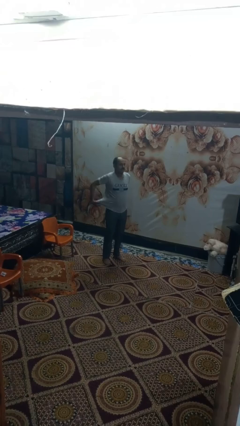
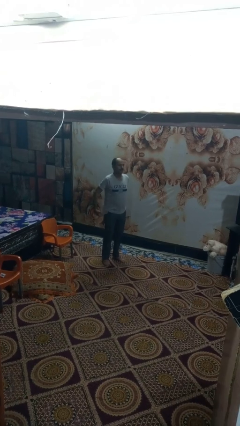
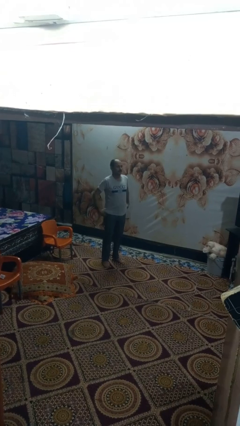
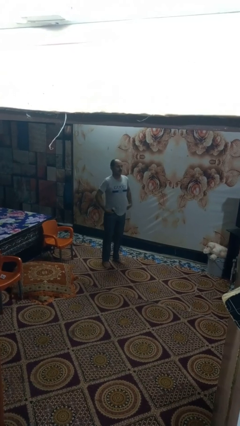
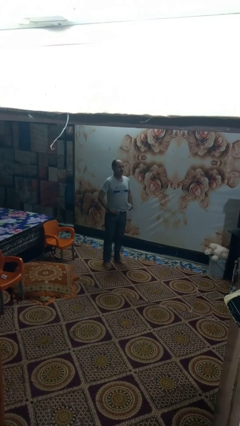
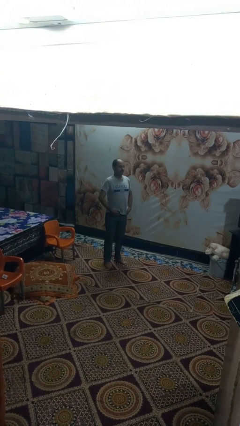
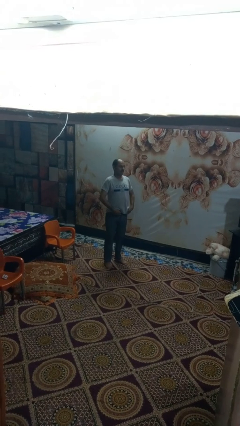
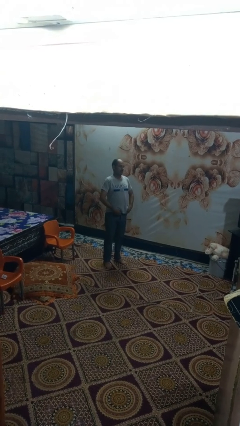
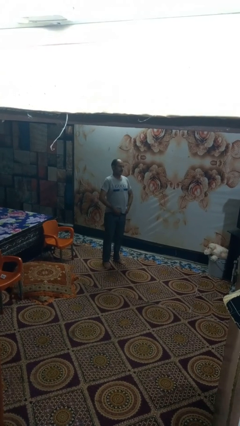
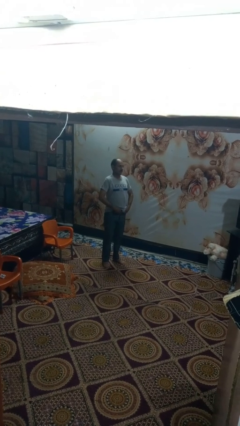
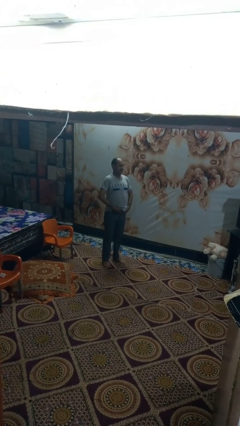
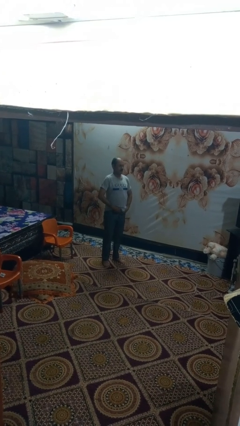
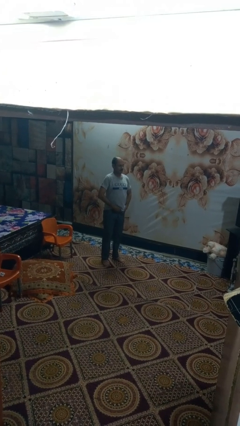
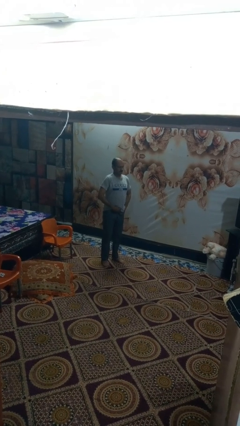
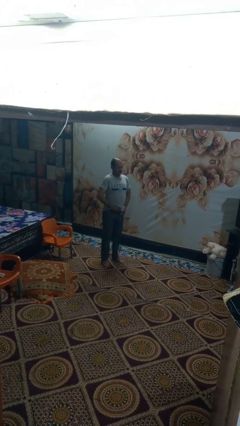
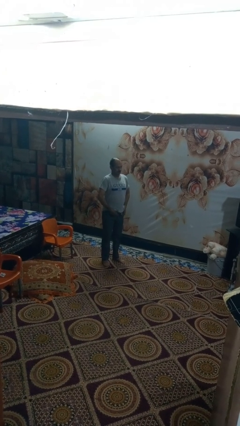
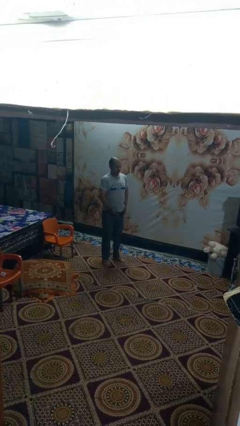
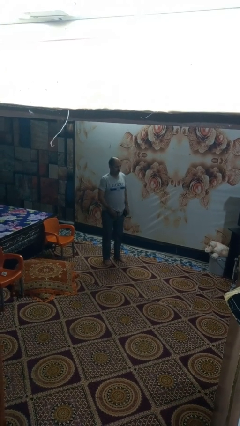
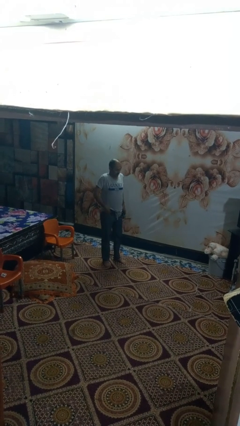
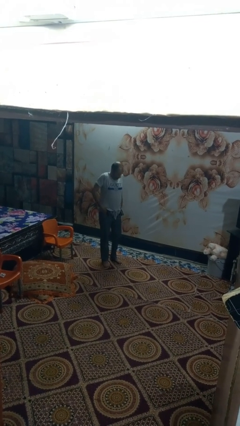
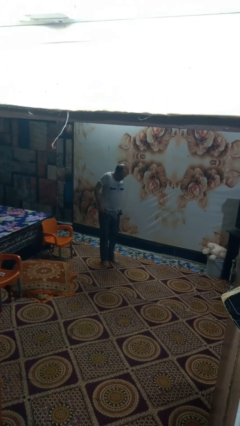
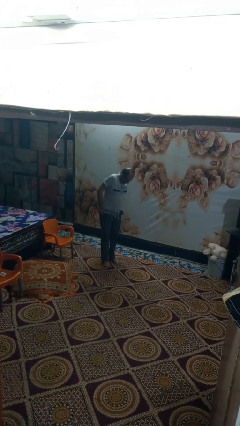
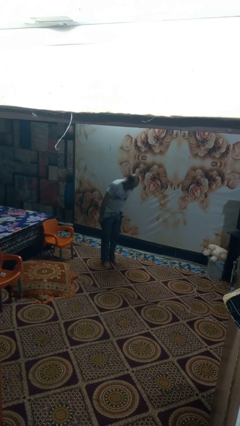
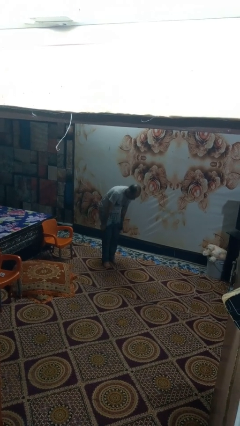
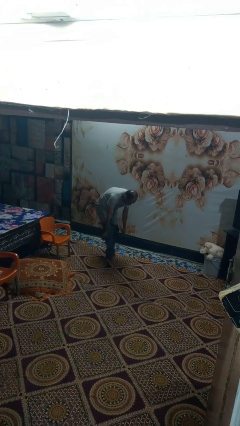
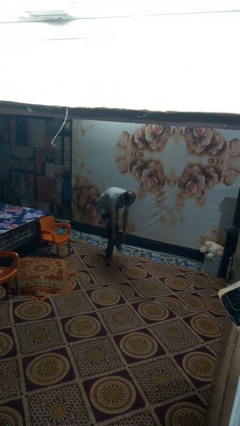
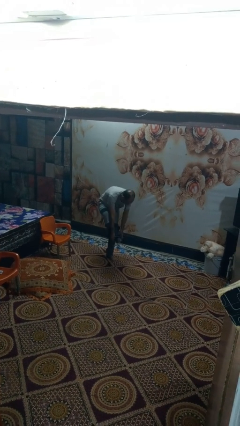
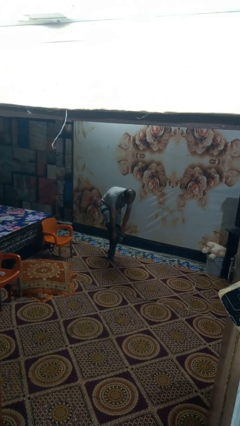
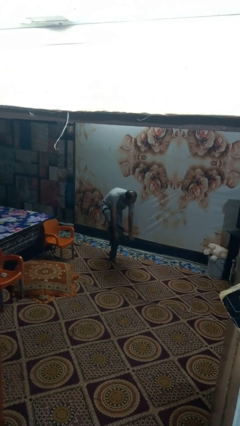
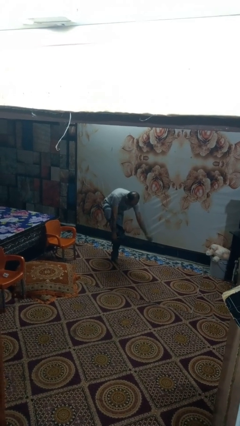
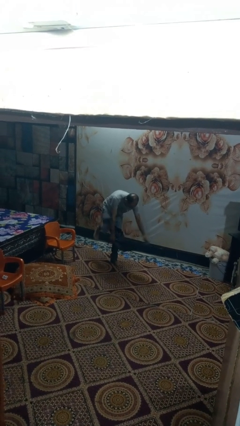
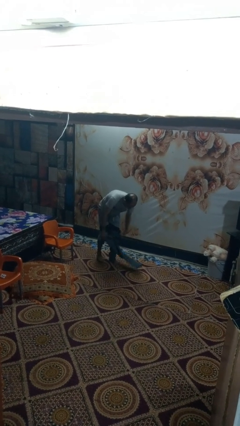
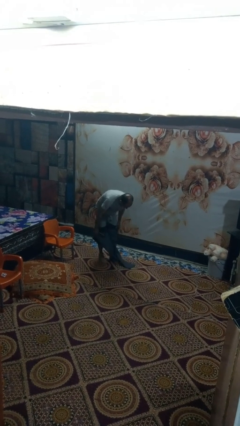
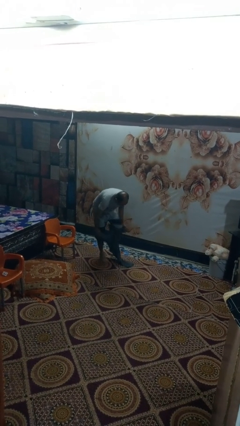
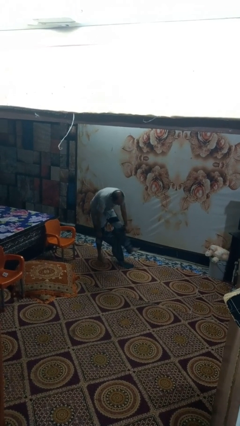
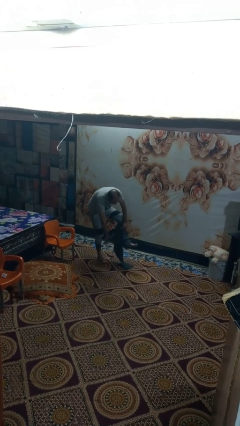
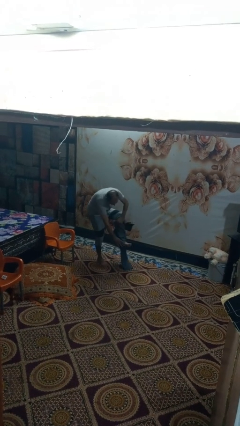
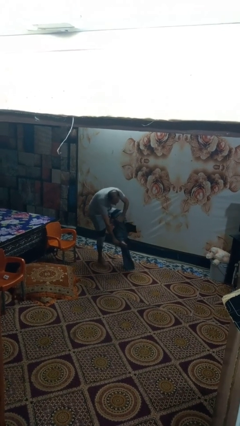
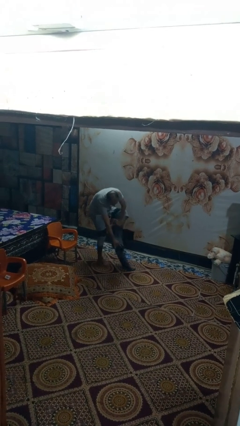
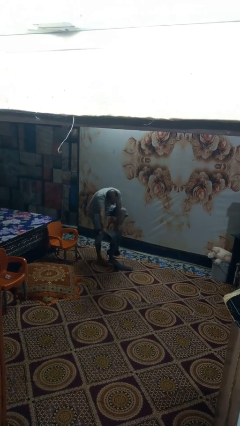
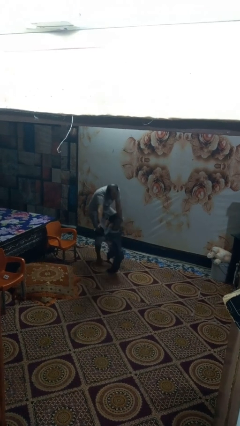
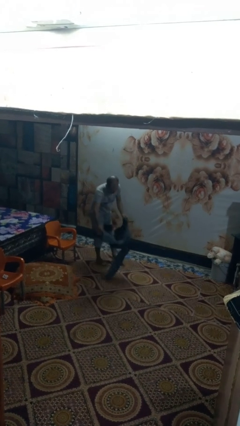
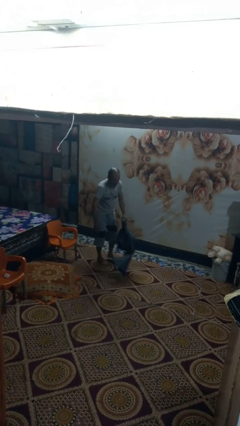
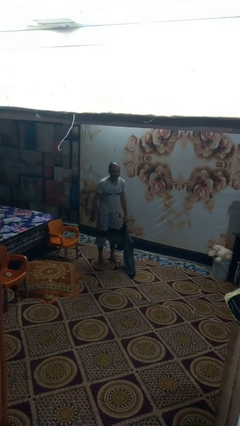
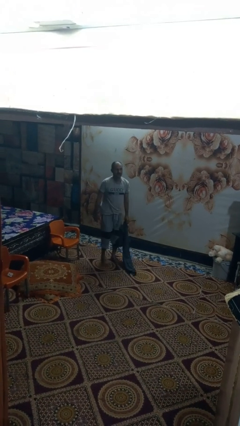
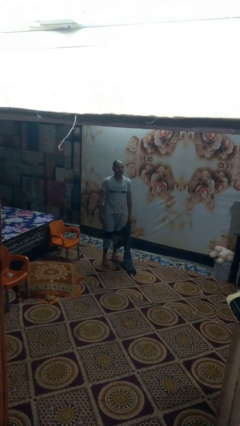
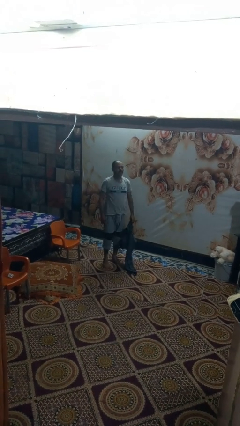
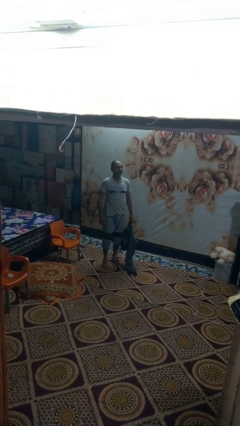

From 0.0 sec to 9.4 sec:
person takes off pants

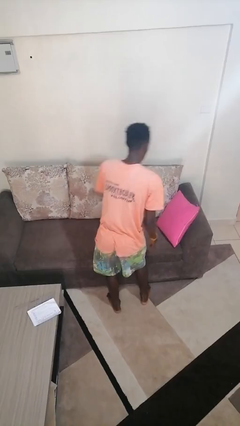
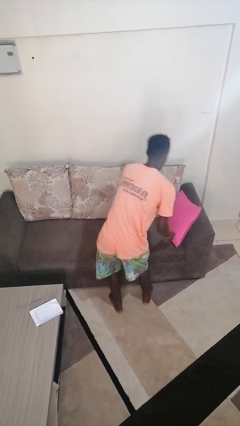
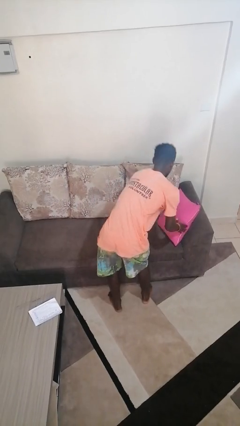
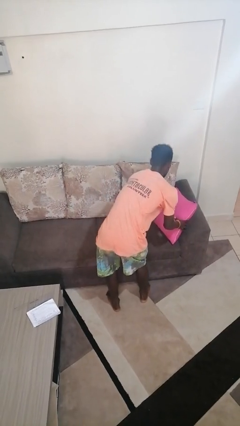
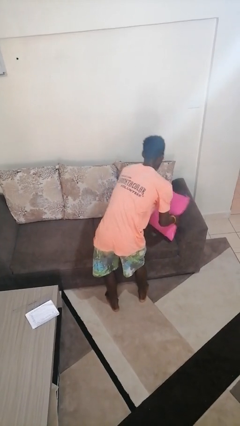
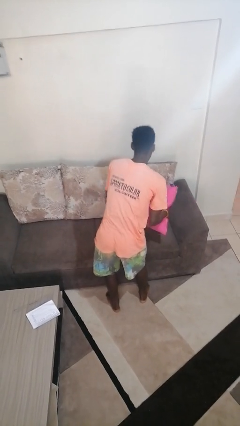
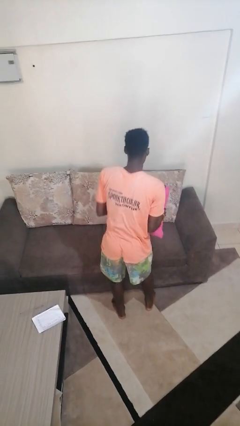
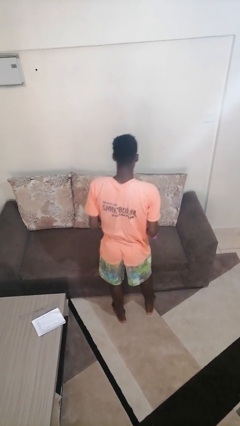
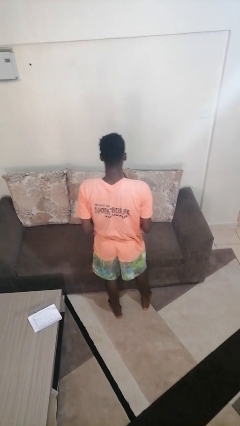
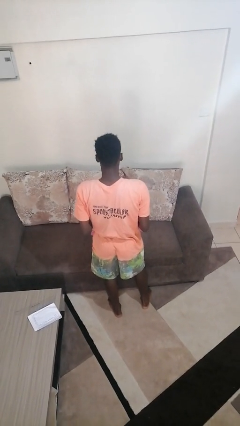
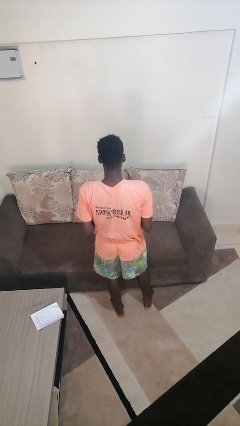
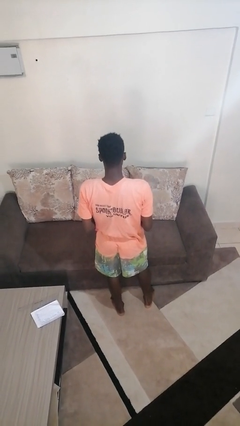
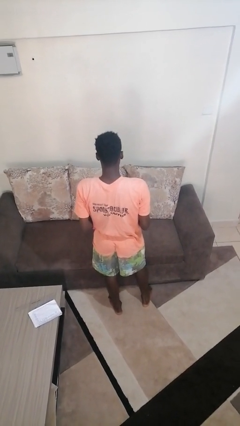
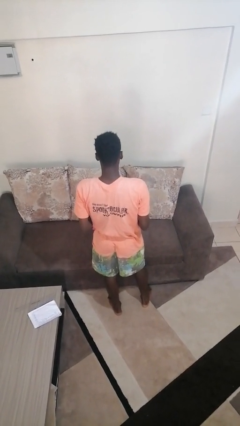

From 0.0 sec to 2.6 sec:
person picks up object from couch

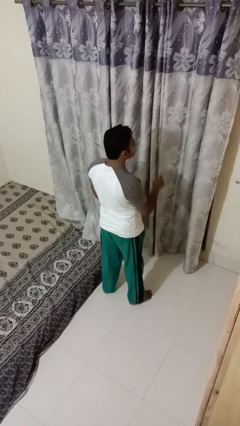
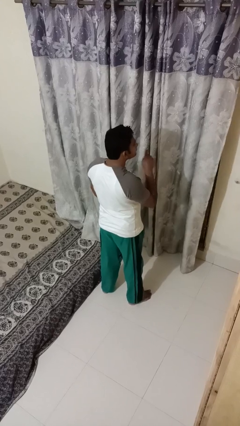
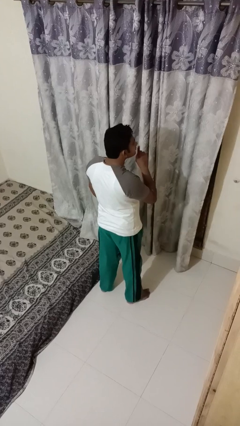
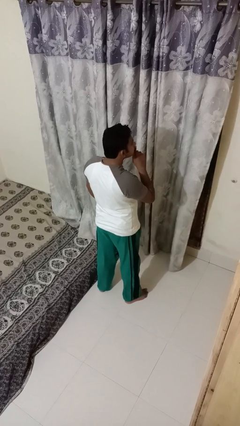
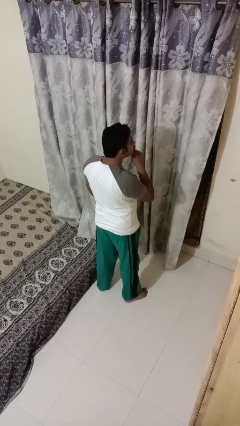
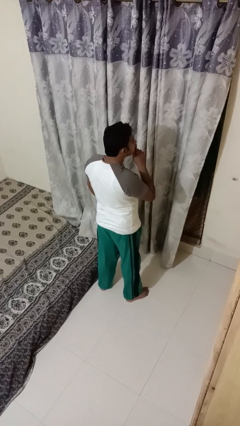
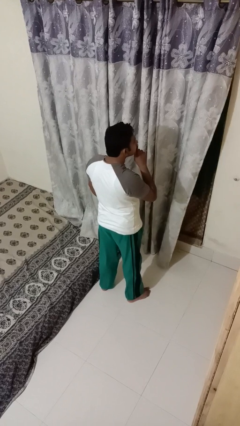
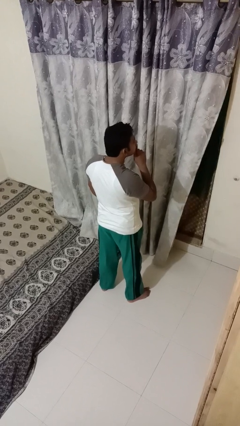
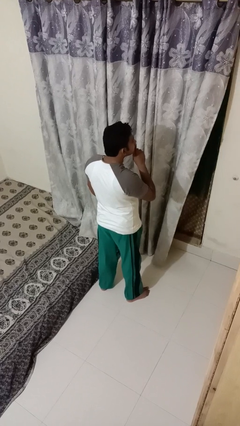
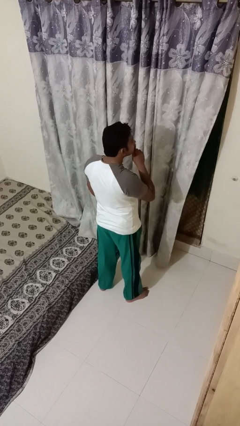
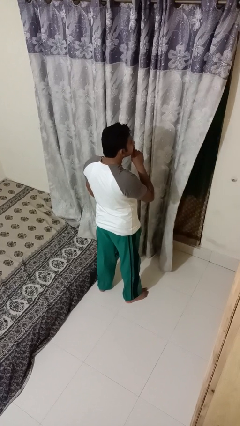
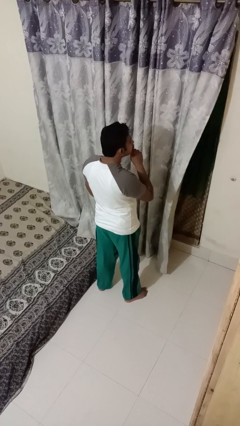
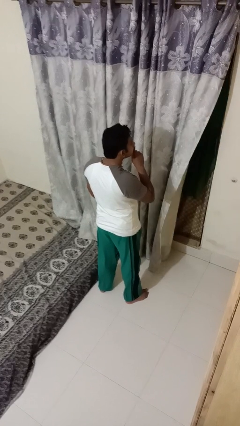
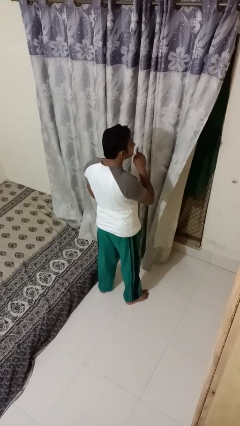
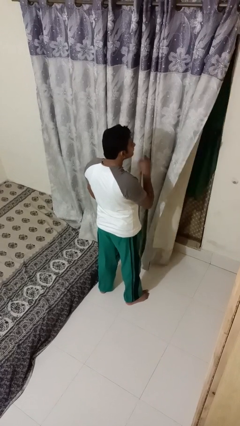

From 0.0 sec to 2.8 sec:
person gestures be quiet

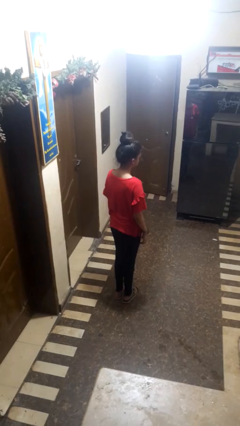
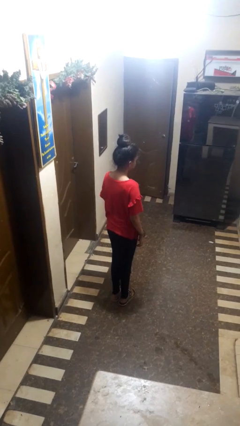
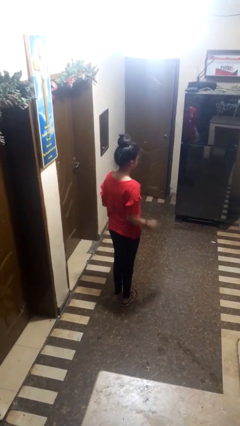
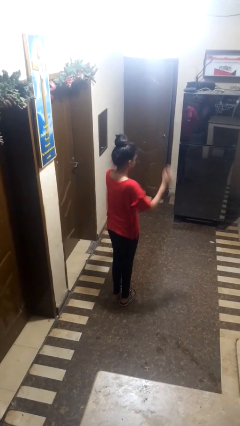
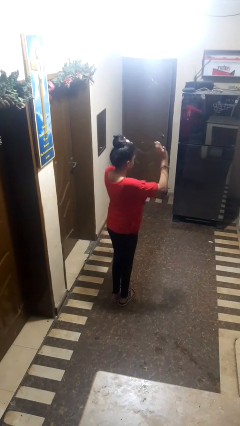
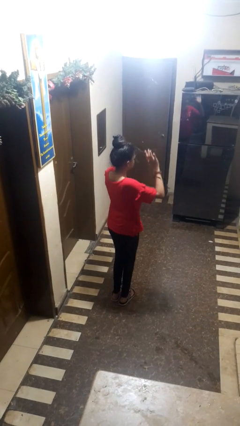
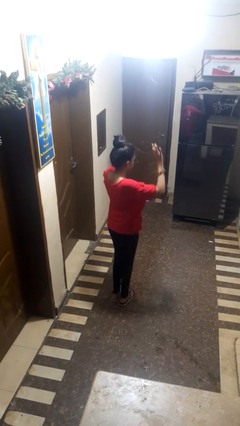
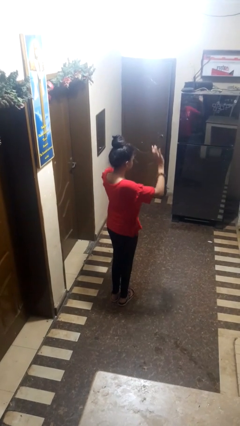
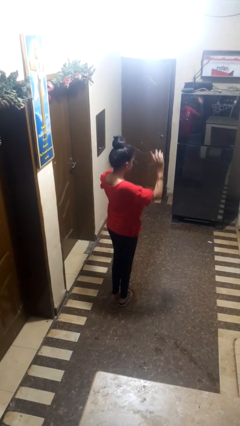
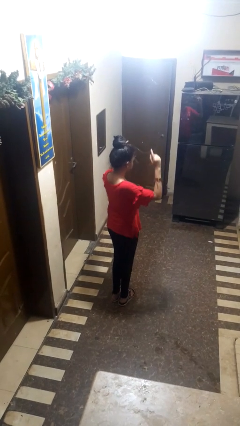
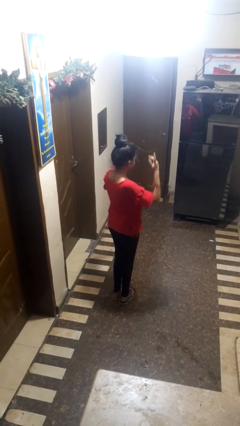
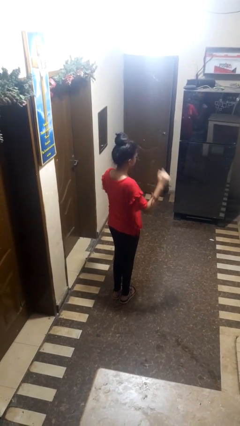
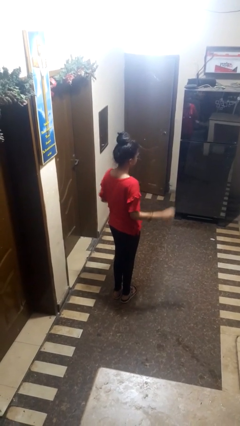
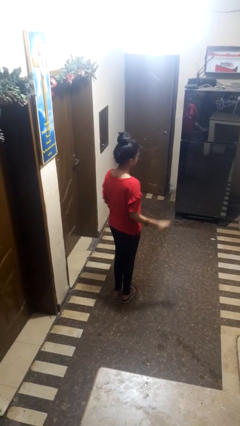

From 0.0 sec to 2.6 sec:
person dances in place

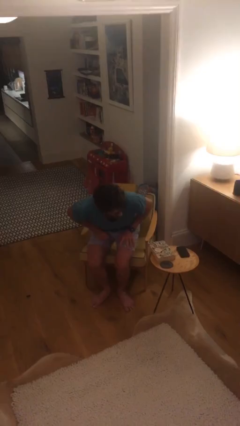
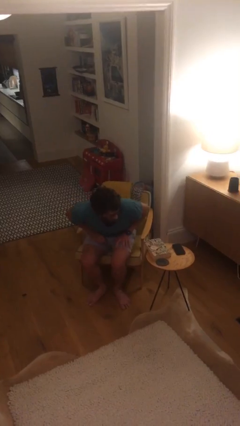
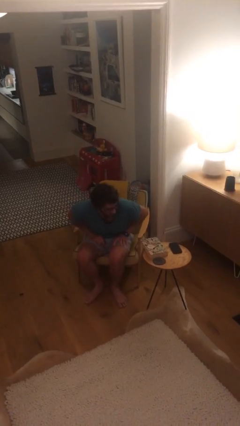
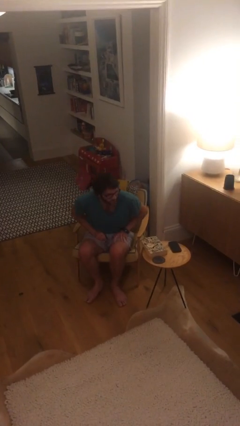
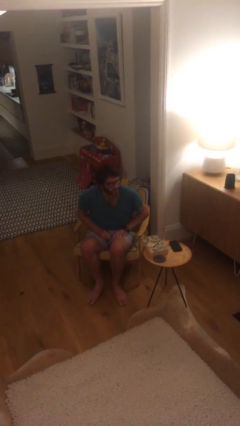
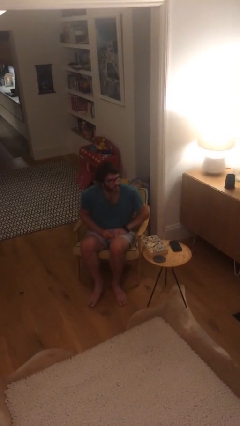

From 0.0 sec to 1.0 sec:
person sits down
